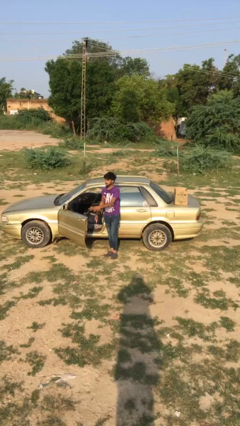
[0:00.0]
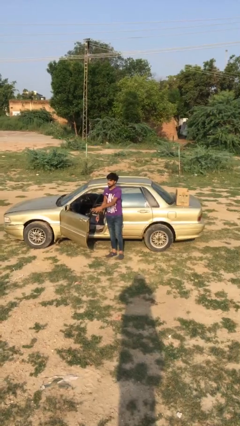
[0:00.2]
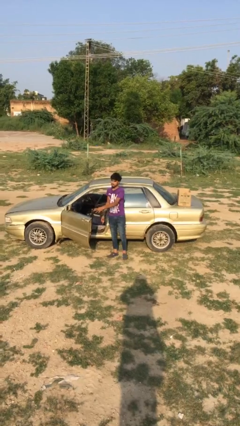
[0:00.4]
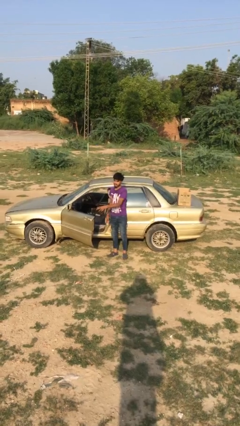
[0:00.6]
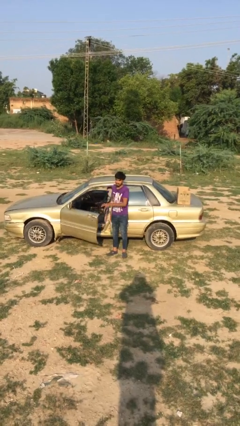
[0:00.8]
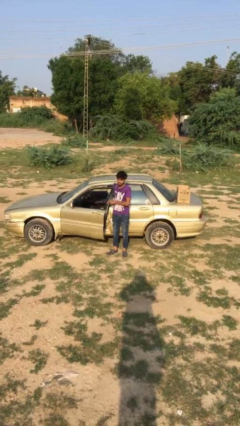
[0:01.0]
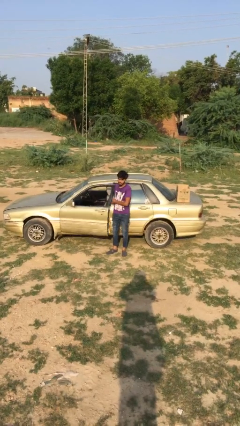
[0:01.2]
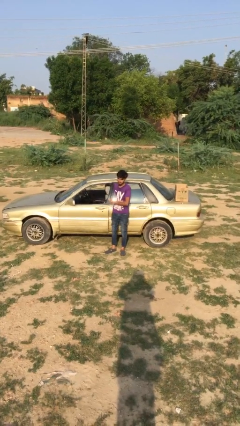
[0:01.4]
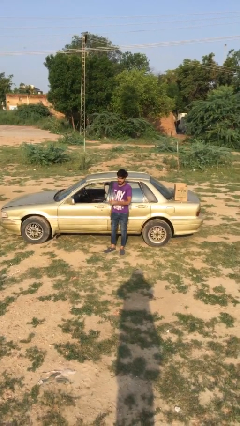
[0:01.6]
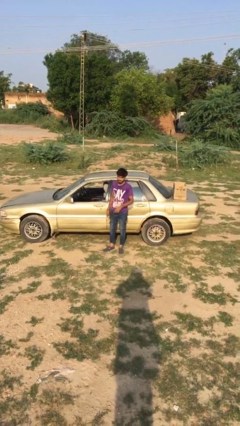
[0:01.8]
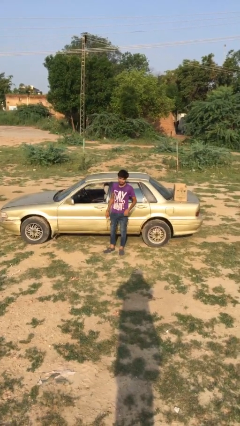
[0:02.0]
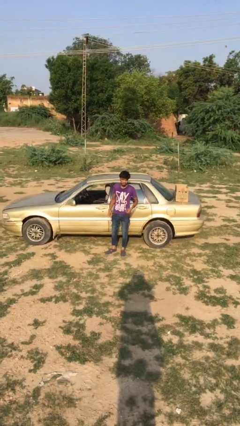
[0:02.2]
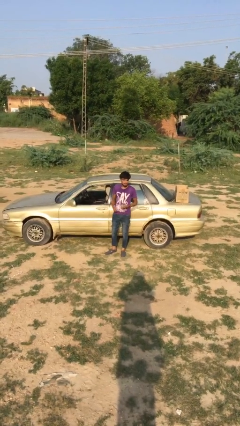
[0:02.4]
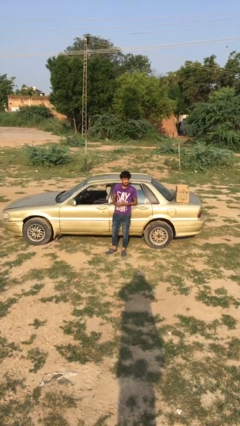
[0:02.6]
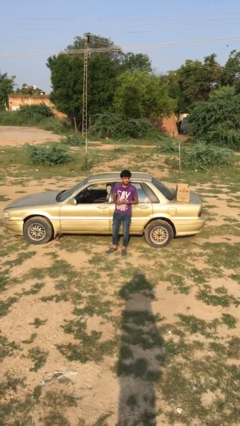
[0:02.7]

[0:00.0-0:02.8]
person closes car door

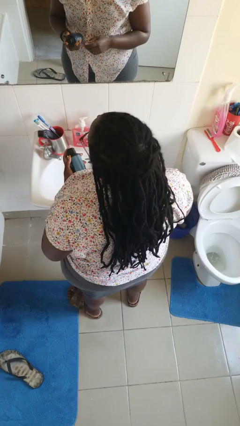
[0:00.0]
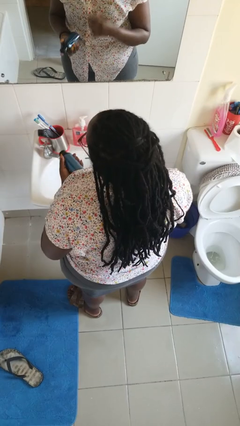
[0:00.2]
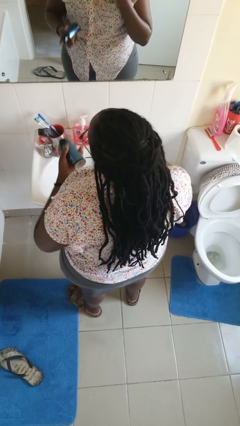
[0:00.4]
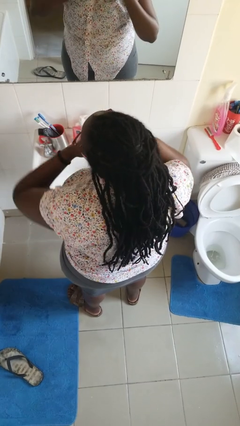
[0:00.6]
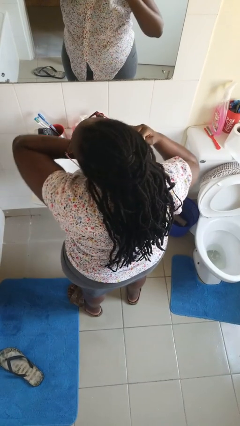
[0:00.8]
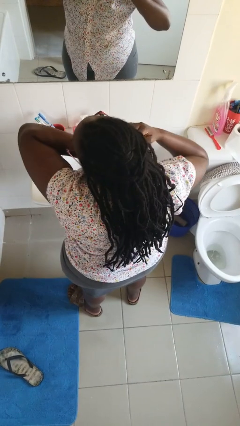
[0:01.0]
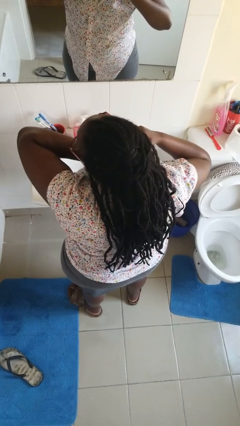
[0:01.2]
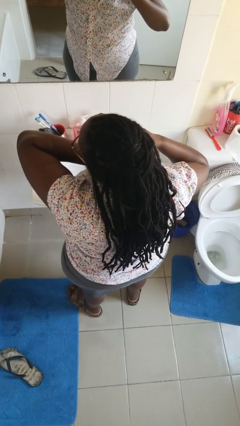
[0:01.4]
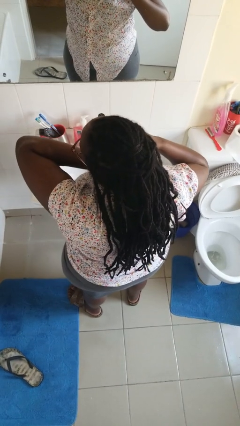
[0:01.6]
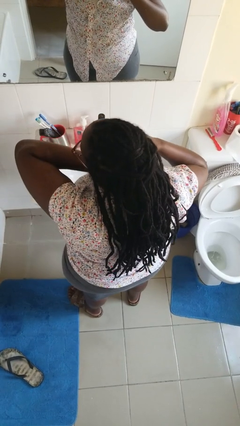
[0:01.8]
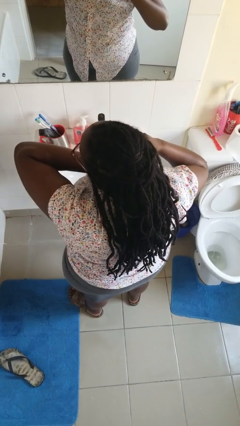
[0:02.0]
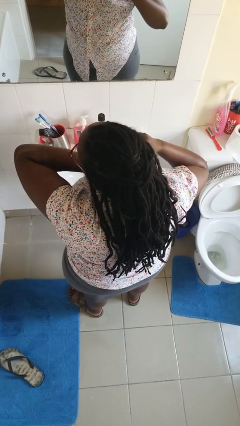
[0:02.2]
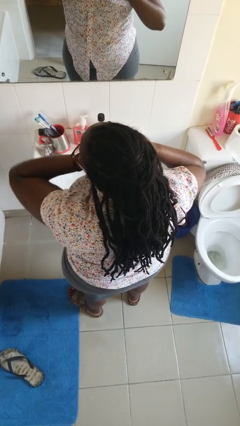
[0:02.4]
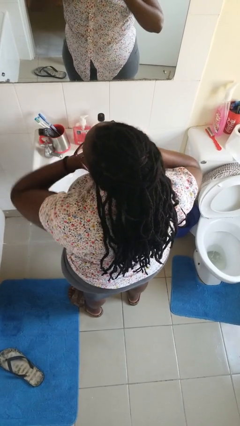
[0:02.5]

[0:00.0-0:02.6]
person applies deodorant

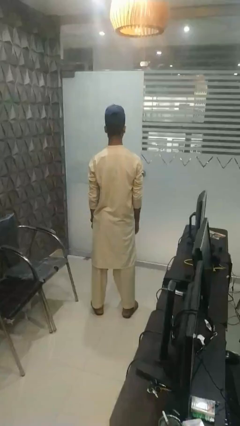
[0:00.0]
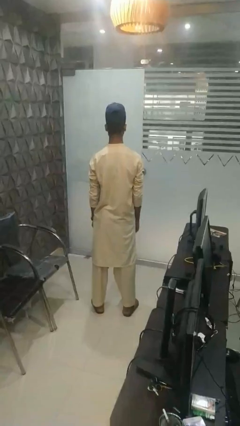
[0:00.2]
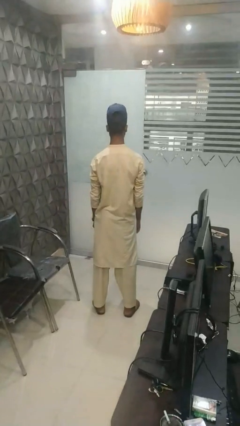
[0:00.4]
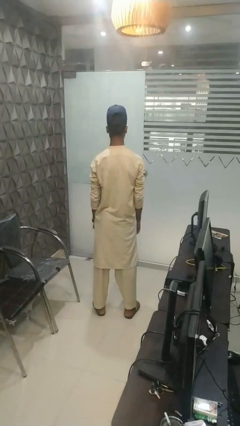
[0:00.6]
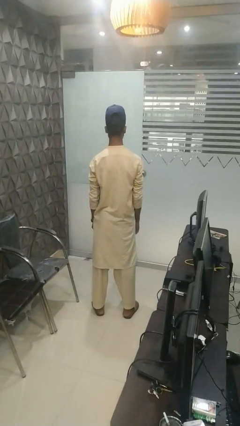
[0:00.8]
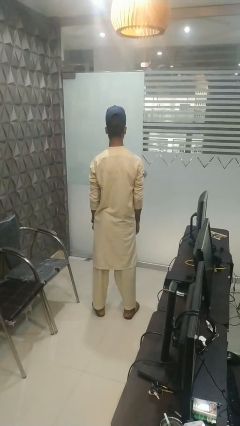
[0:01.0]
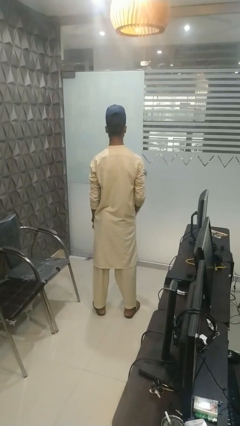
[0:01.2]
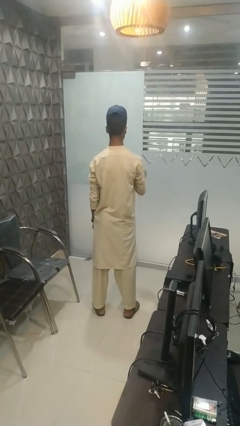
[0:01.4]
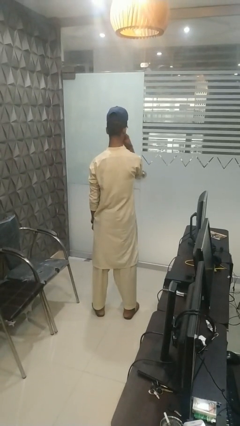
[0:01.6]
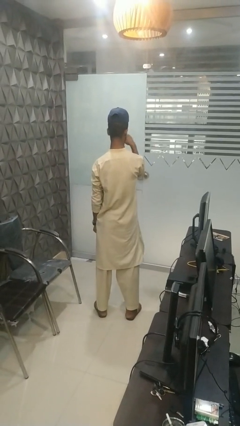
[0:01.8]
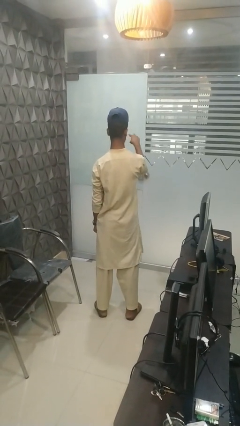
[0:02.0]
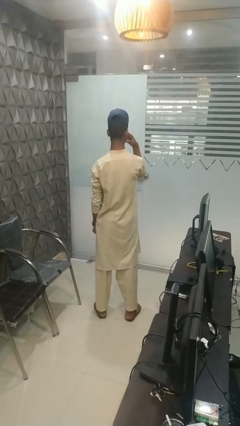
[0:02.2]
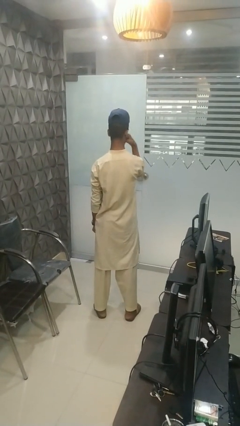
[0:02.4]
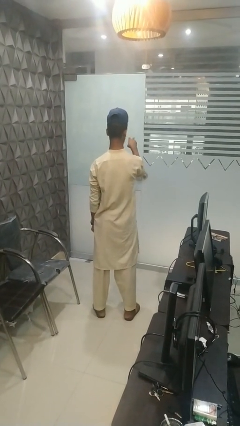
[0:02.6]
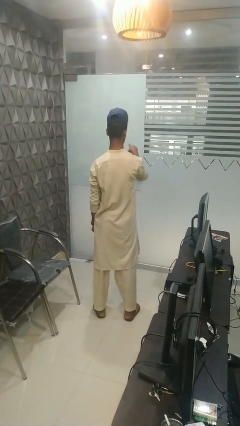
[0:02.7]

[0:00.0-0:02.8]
person gestures watch closely

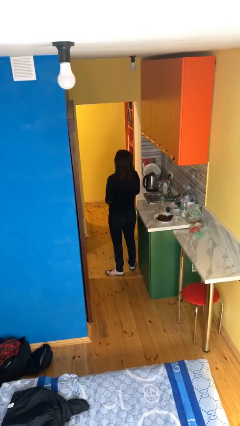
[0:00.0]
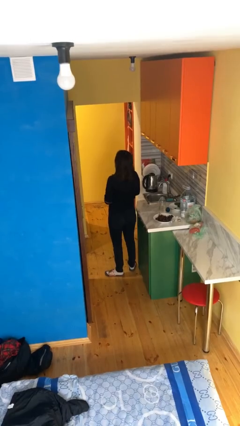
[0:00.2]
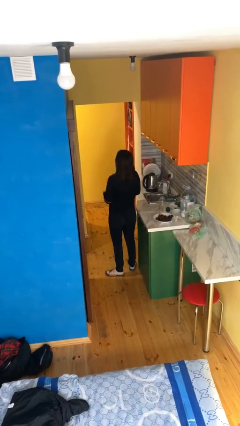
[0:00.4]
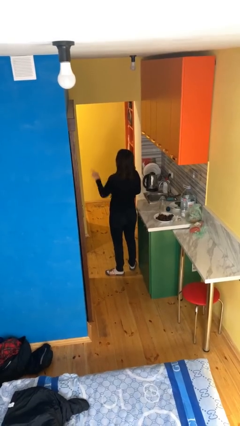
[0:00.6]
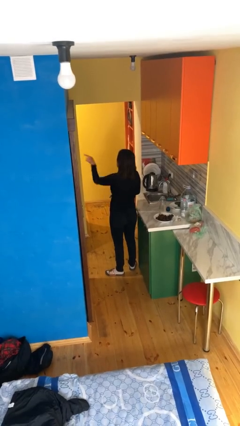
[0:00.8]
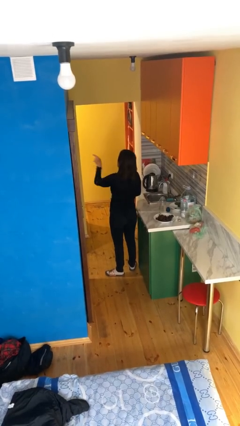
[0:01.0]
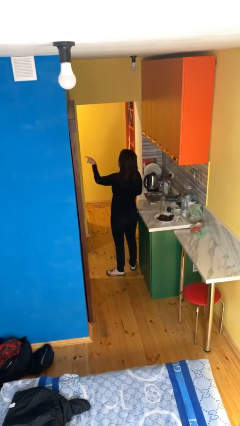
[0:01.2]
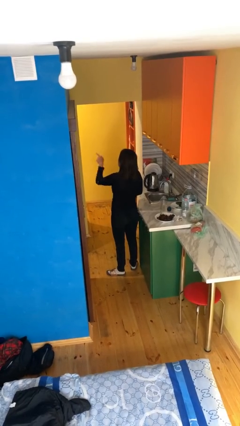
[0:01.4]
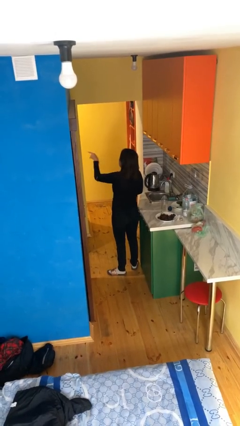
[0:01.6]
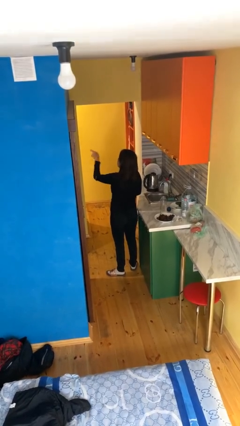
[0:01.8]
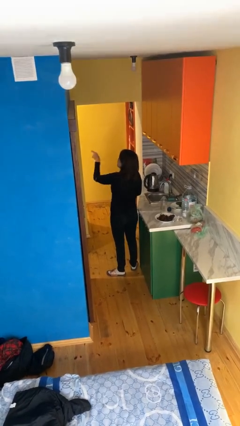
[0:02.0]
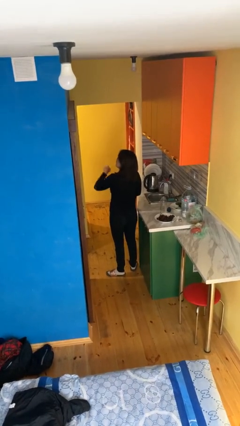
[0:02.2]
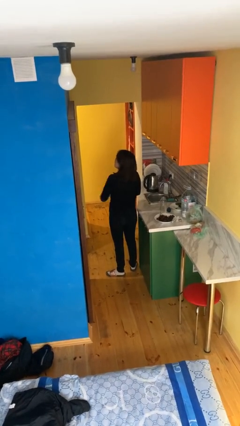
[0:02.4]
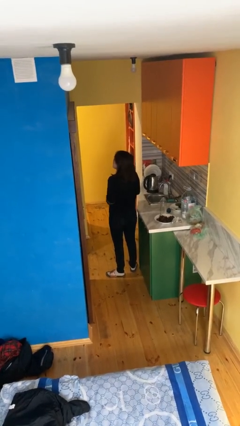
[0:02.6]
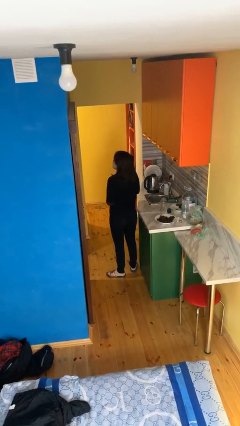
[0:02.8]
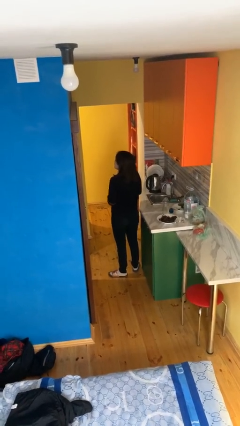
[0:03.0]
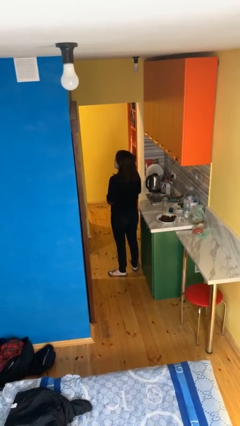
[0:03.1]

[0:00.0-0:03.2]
person points at person

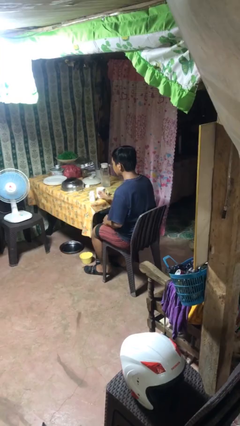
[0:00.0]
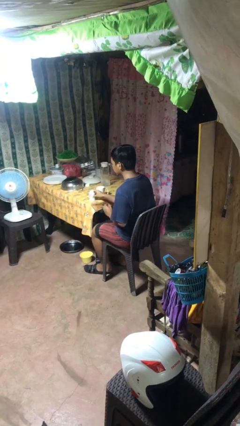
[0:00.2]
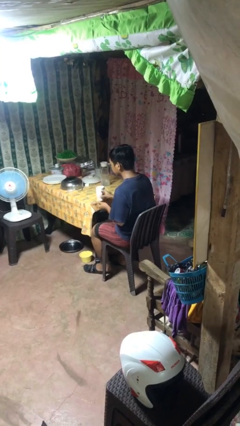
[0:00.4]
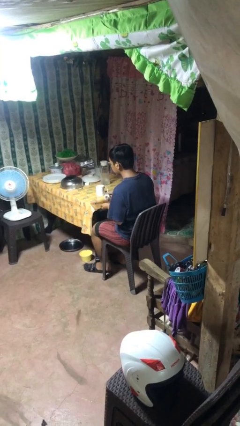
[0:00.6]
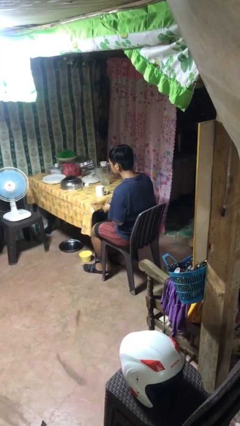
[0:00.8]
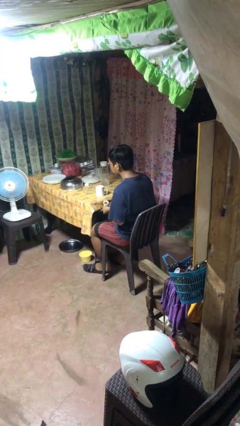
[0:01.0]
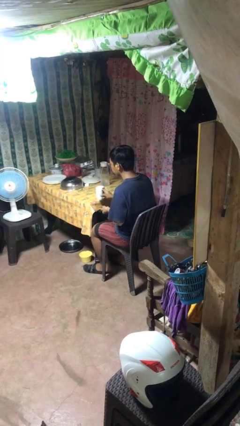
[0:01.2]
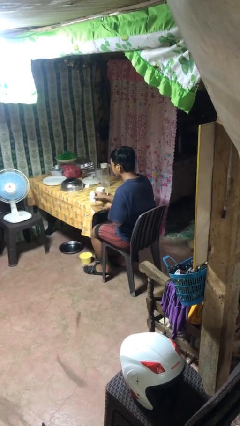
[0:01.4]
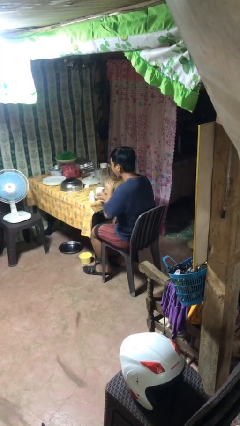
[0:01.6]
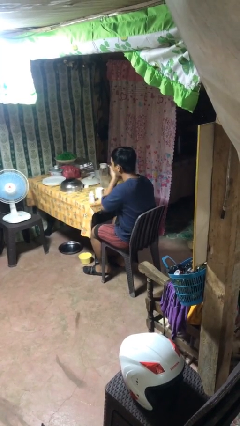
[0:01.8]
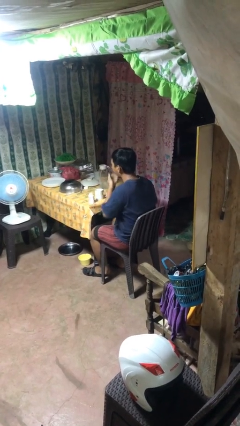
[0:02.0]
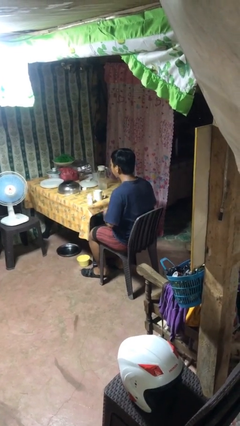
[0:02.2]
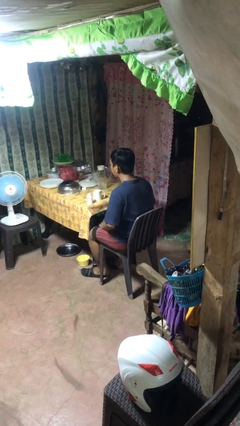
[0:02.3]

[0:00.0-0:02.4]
person takes medicine pills

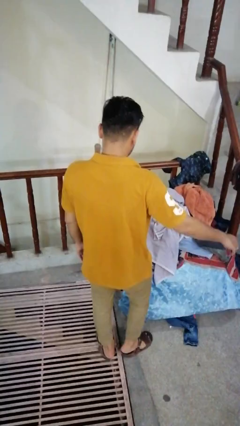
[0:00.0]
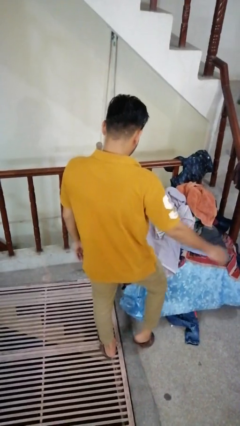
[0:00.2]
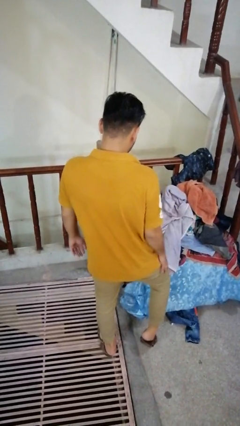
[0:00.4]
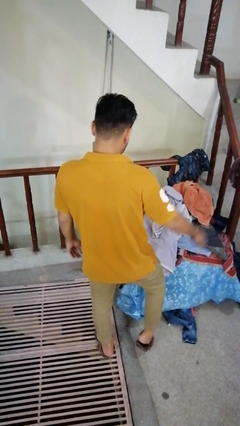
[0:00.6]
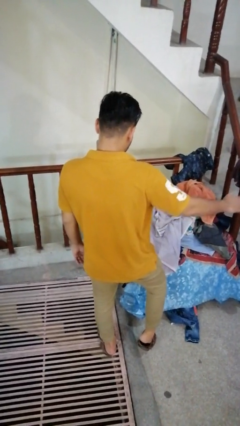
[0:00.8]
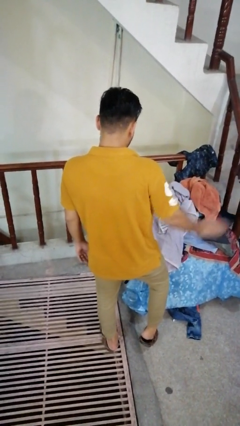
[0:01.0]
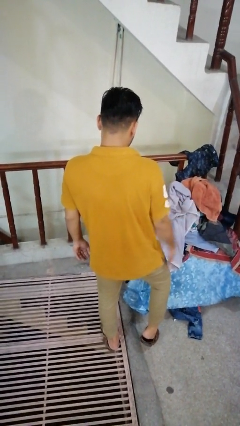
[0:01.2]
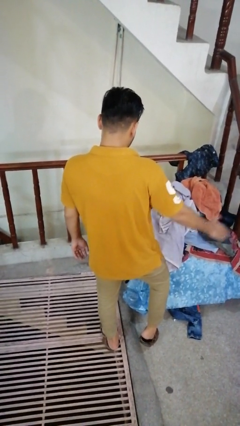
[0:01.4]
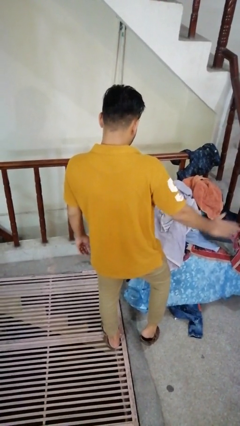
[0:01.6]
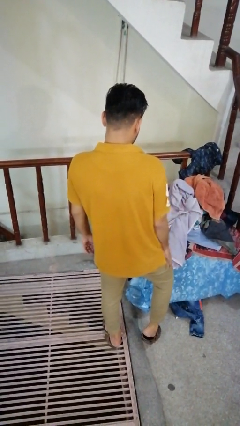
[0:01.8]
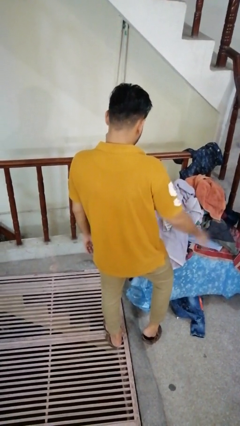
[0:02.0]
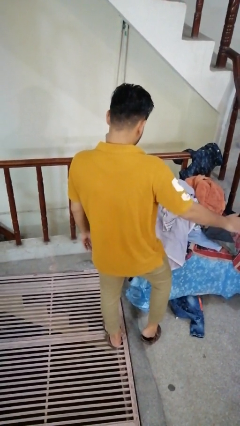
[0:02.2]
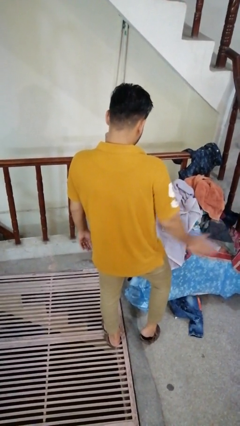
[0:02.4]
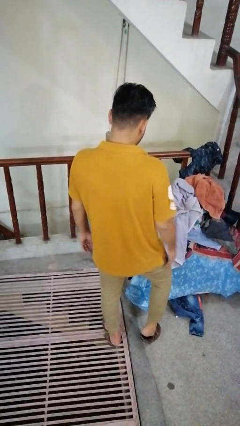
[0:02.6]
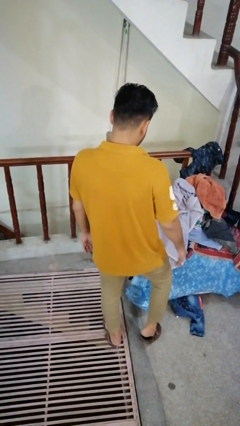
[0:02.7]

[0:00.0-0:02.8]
person slaps hands on thighs

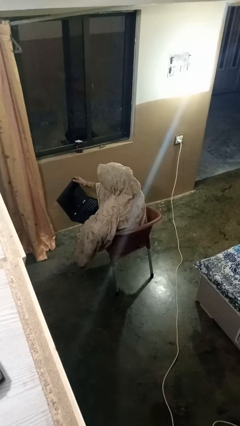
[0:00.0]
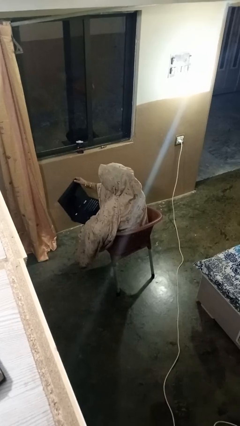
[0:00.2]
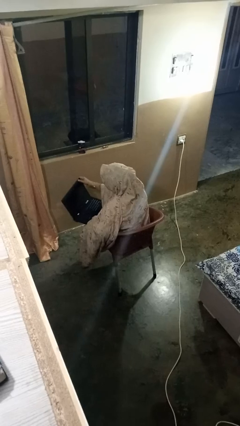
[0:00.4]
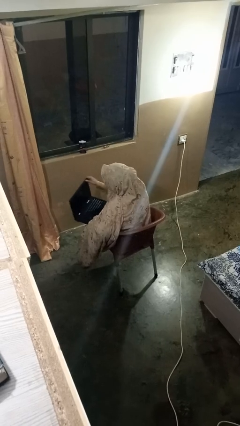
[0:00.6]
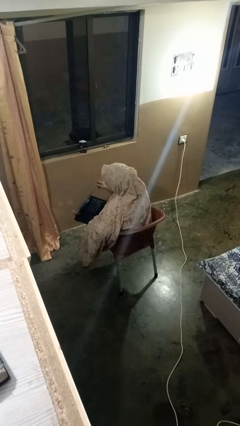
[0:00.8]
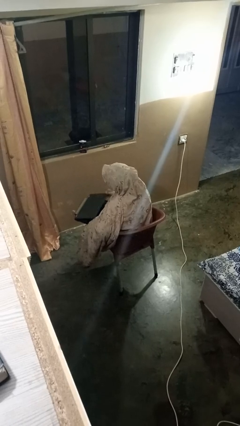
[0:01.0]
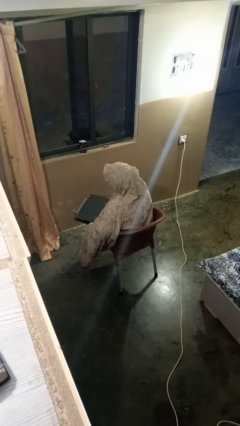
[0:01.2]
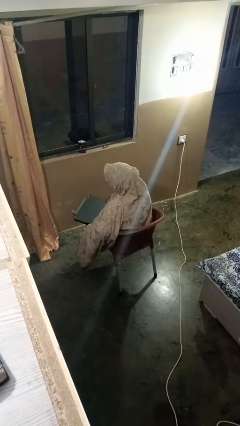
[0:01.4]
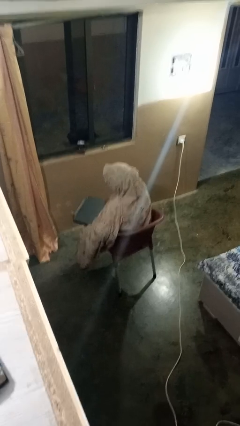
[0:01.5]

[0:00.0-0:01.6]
person closes laptop
